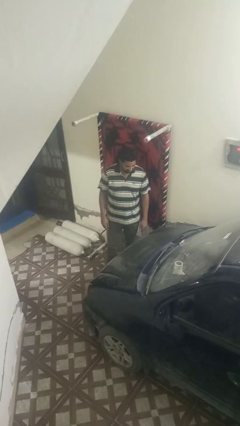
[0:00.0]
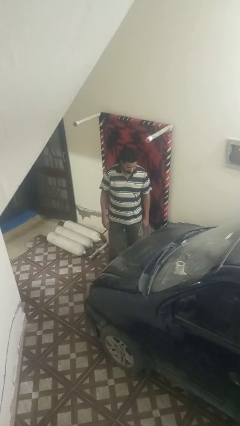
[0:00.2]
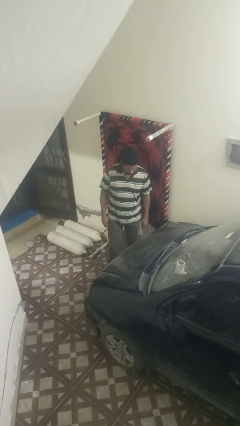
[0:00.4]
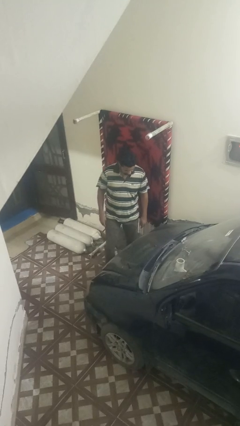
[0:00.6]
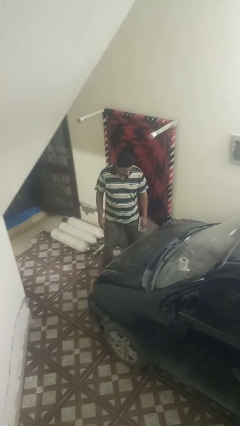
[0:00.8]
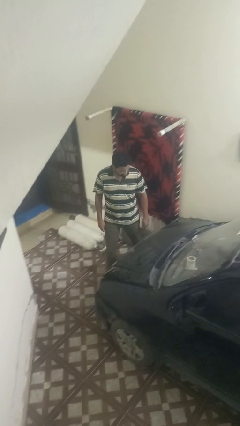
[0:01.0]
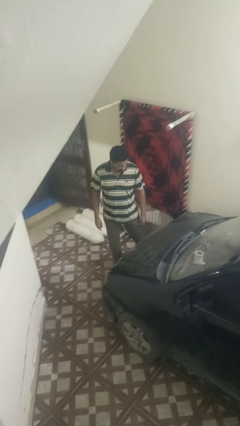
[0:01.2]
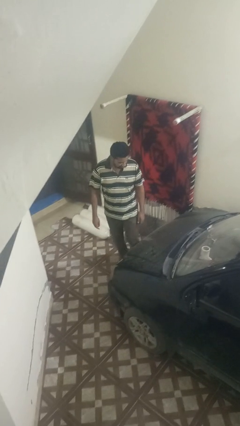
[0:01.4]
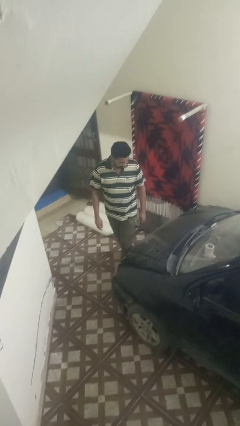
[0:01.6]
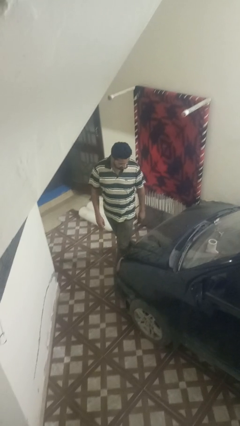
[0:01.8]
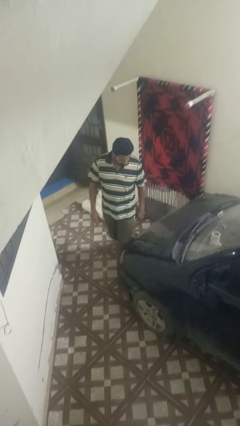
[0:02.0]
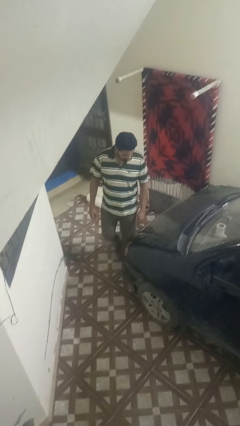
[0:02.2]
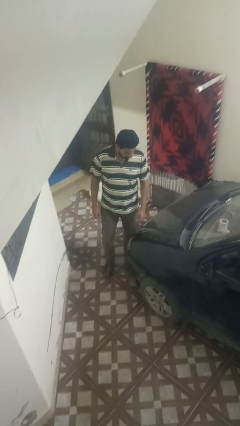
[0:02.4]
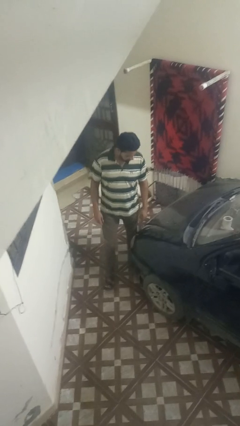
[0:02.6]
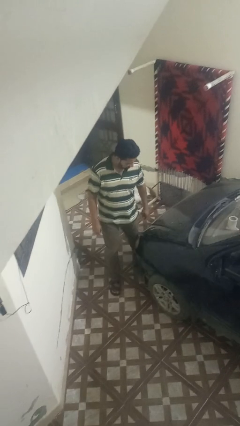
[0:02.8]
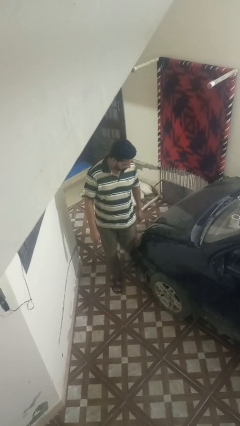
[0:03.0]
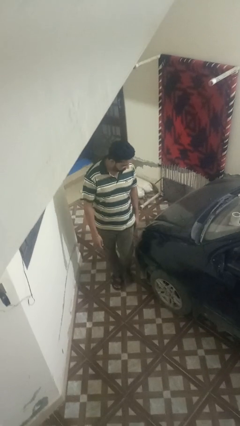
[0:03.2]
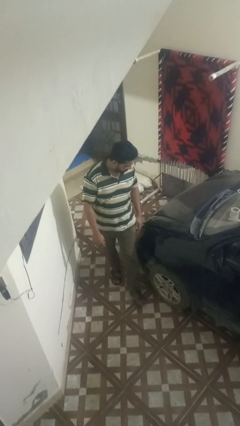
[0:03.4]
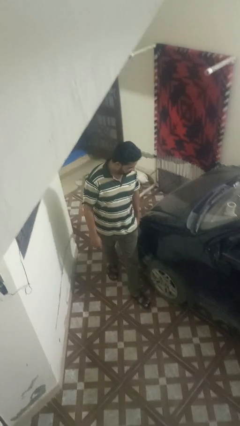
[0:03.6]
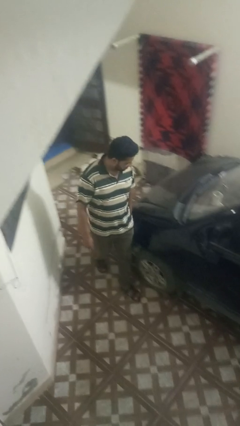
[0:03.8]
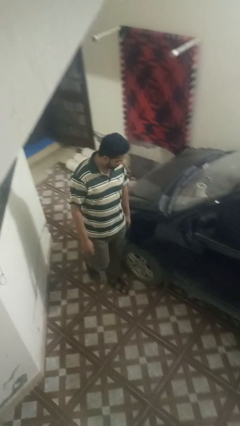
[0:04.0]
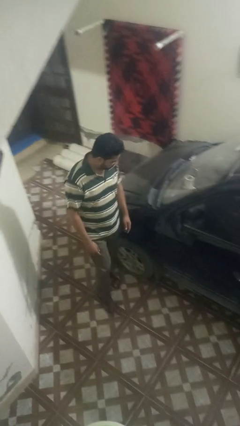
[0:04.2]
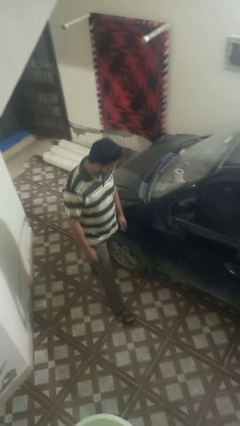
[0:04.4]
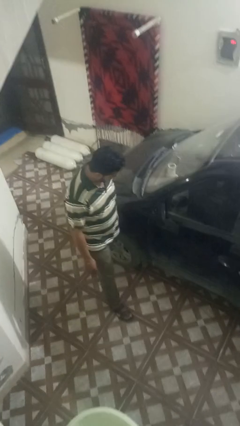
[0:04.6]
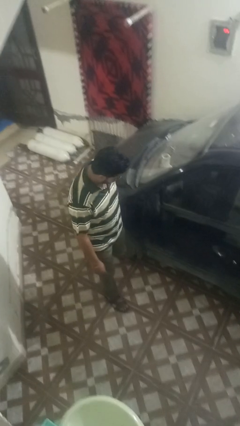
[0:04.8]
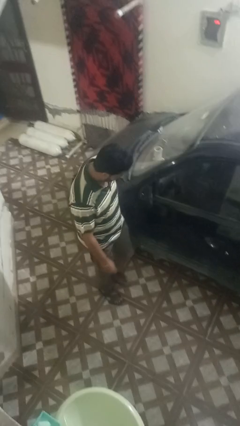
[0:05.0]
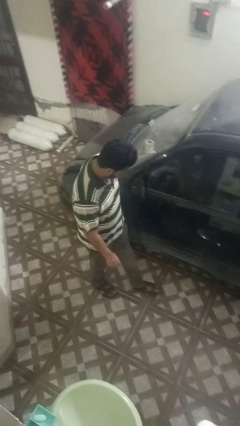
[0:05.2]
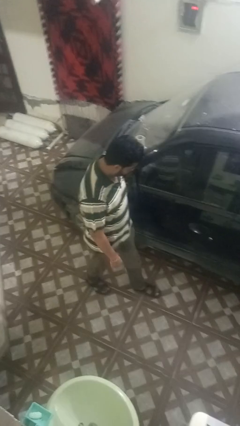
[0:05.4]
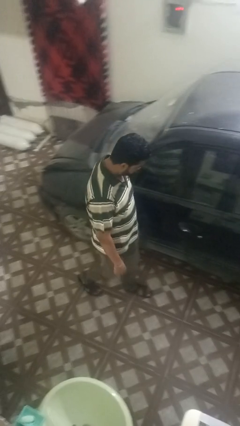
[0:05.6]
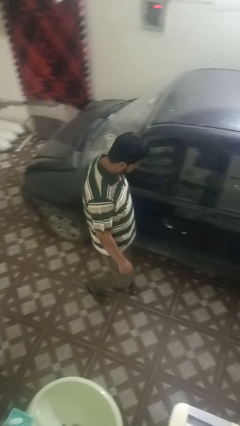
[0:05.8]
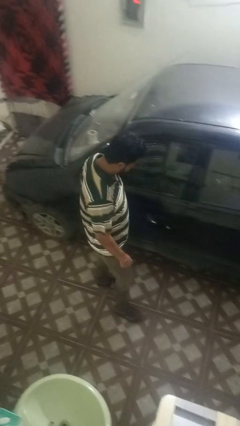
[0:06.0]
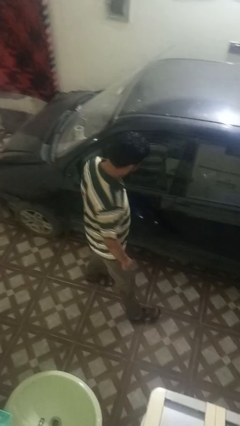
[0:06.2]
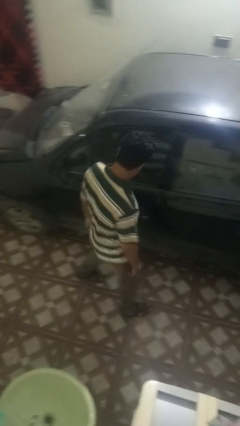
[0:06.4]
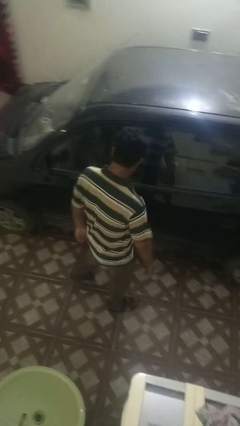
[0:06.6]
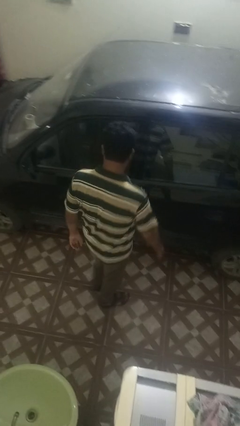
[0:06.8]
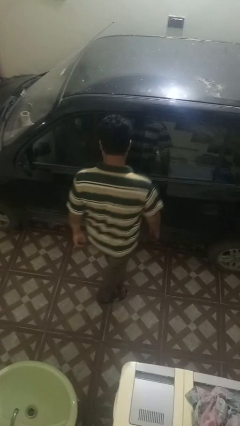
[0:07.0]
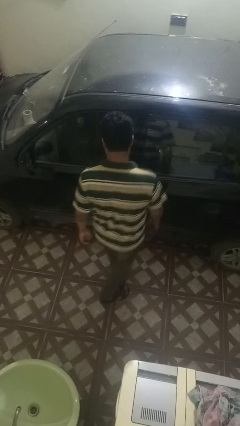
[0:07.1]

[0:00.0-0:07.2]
person walks around car

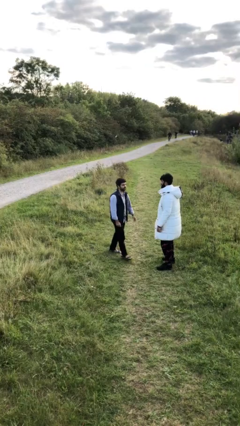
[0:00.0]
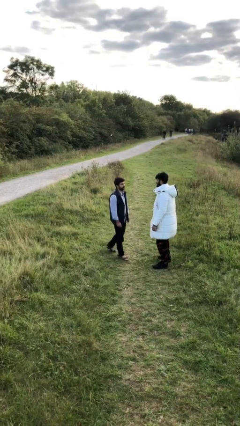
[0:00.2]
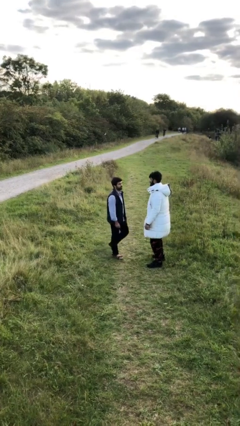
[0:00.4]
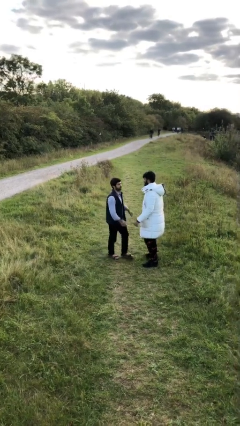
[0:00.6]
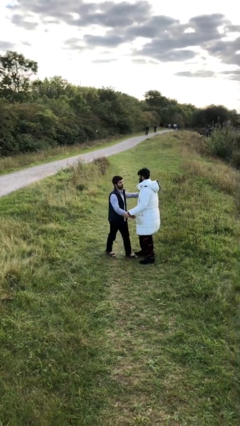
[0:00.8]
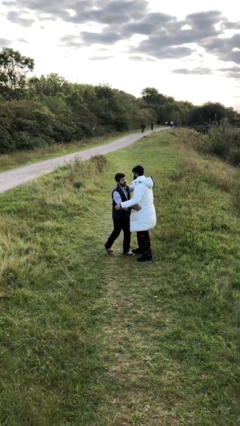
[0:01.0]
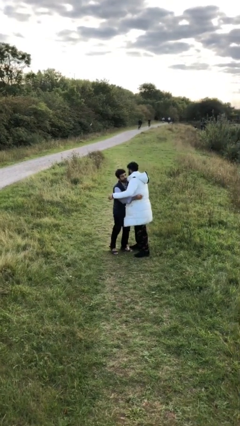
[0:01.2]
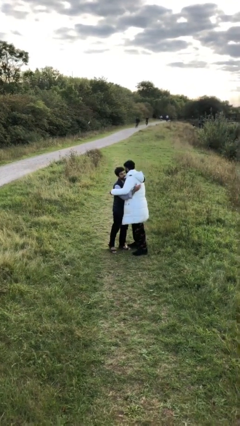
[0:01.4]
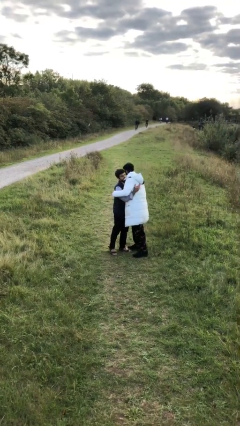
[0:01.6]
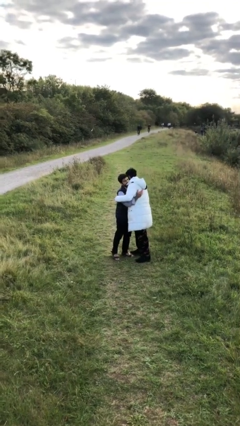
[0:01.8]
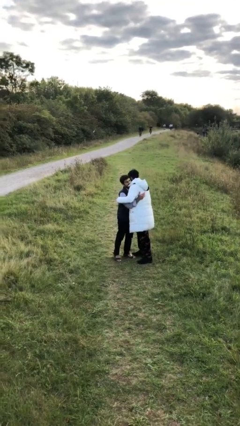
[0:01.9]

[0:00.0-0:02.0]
person embraces person

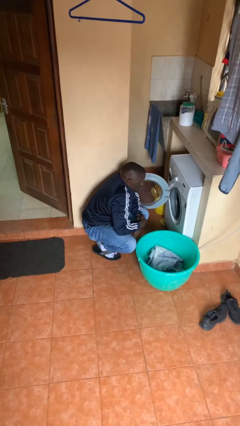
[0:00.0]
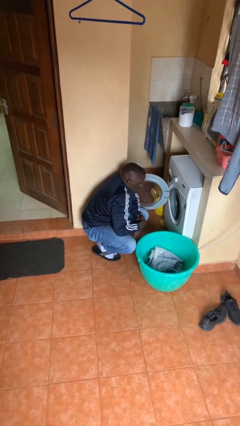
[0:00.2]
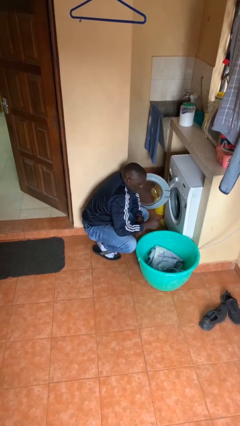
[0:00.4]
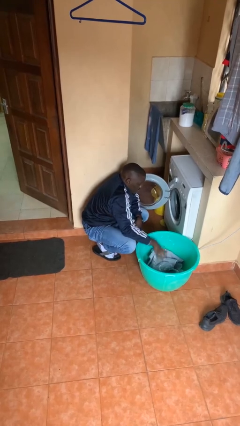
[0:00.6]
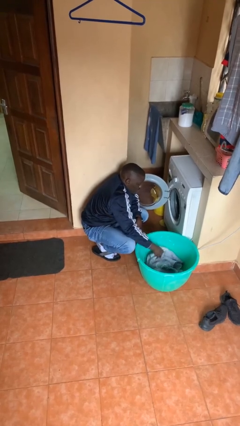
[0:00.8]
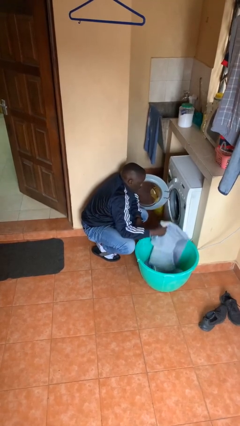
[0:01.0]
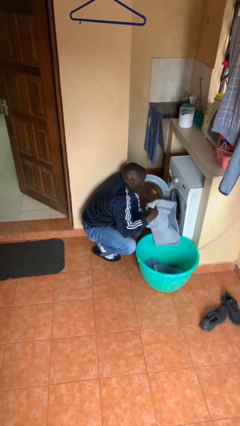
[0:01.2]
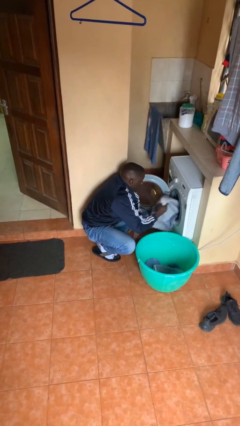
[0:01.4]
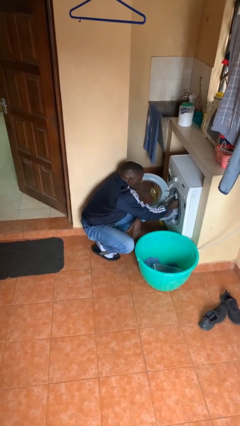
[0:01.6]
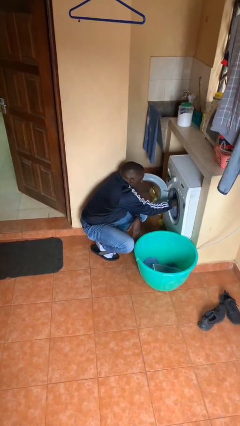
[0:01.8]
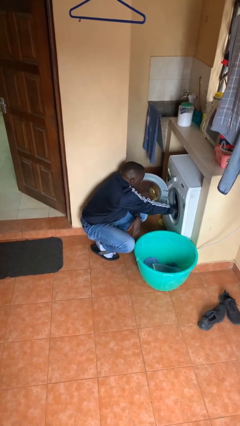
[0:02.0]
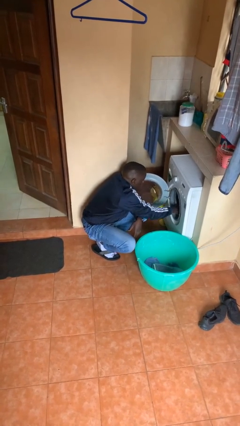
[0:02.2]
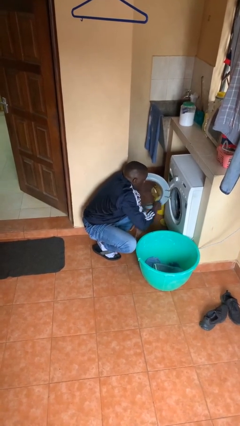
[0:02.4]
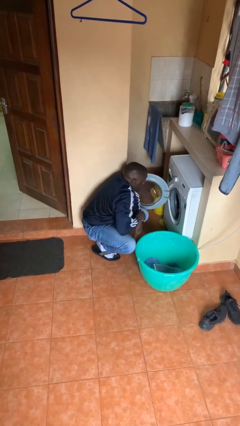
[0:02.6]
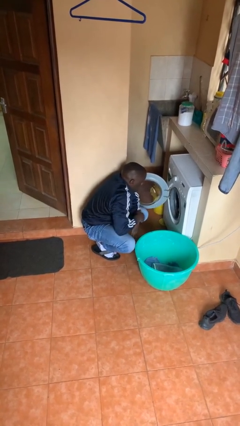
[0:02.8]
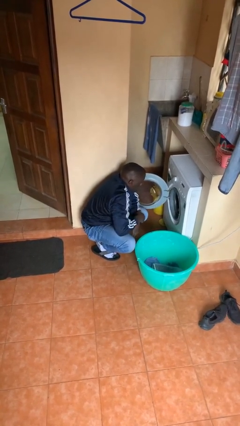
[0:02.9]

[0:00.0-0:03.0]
person loads clotheswasher

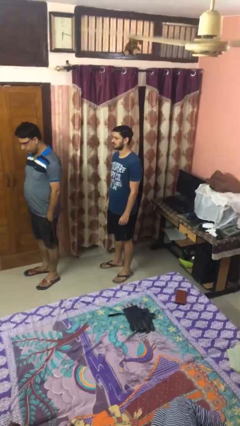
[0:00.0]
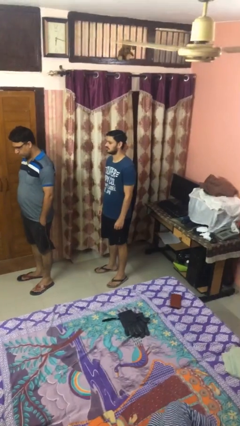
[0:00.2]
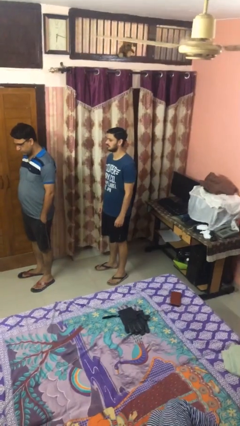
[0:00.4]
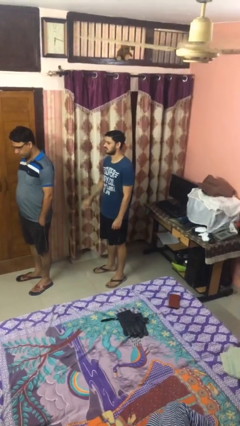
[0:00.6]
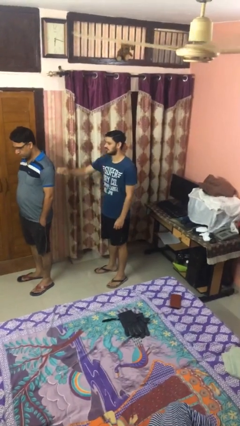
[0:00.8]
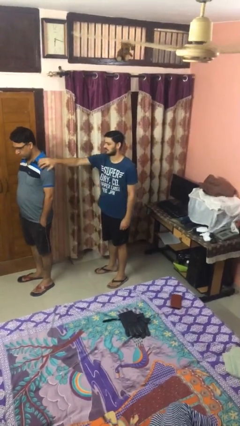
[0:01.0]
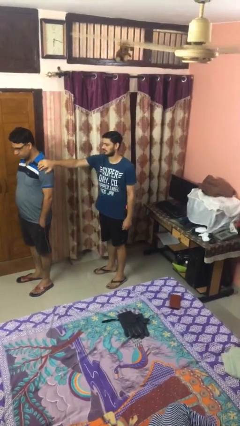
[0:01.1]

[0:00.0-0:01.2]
person grabs person by shoulder

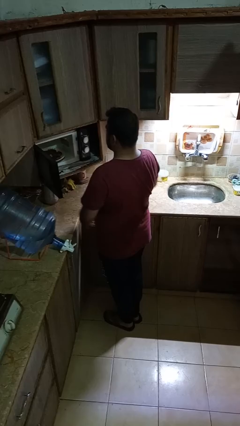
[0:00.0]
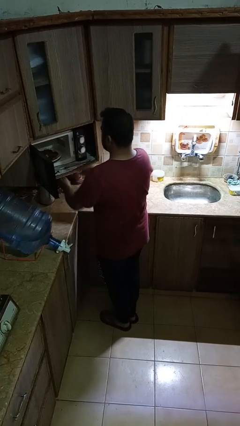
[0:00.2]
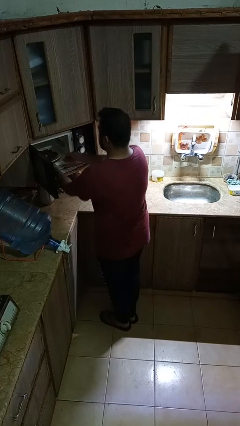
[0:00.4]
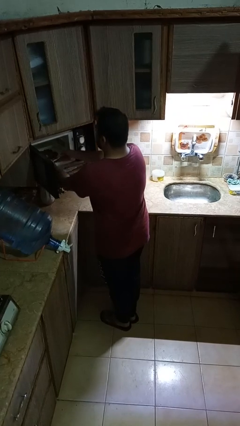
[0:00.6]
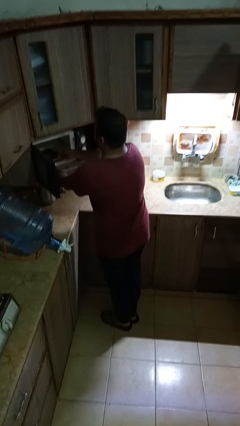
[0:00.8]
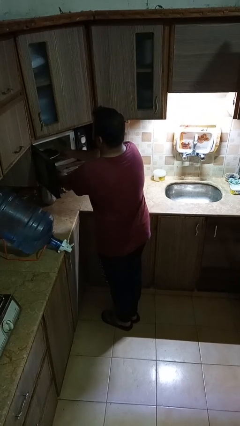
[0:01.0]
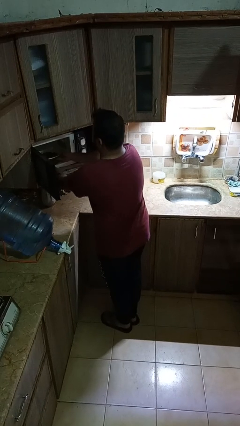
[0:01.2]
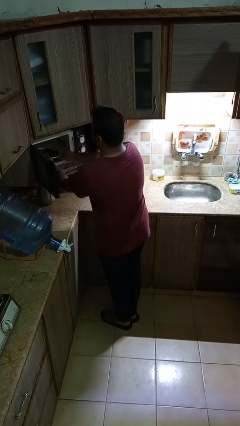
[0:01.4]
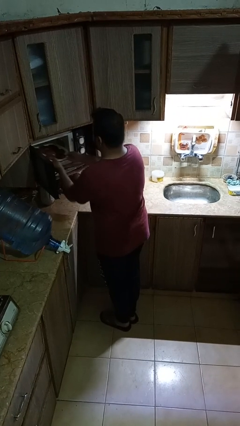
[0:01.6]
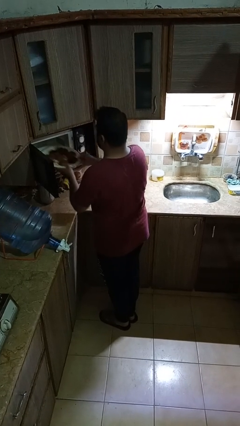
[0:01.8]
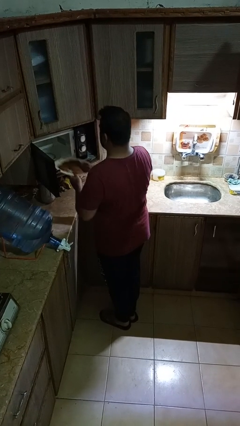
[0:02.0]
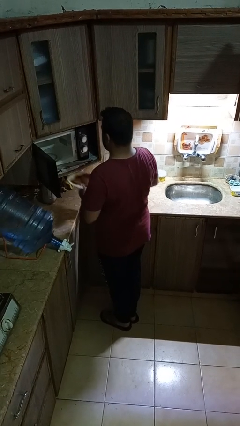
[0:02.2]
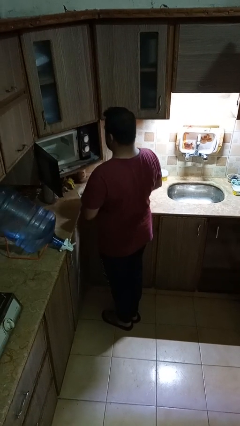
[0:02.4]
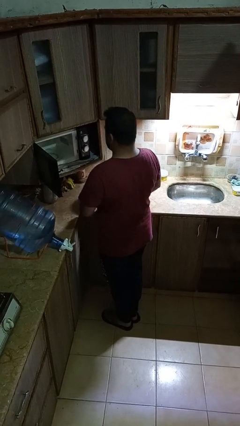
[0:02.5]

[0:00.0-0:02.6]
person takes object from microwave

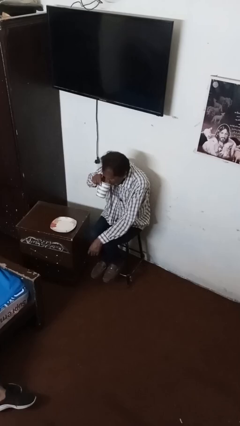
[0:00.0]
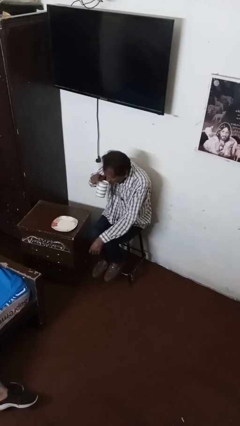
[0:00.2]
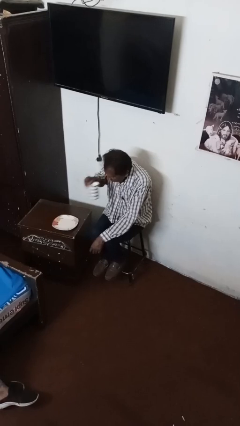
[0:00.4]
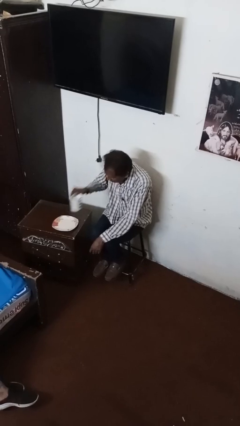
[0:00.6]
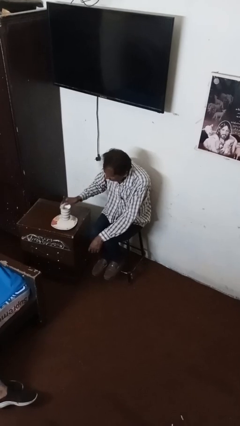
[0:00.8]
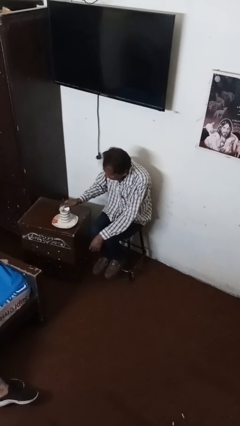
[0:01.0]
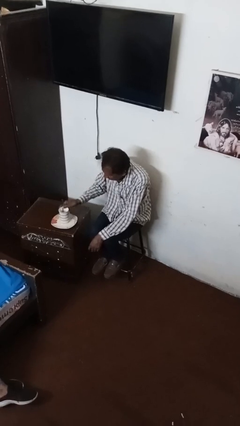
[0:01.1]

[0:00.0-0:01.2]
person drinks from mug

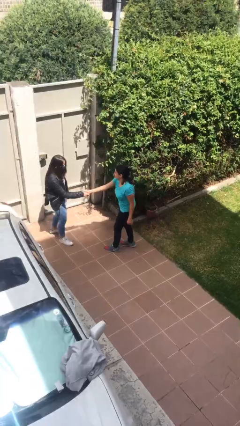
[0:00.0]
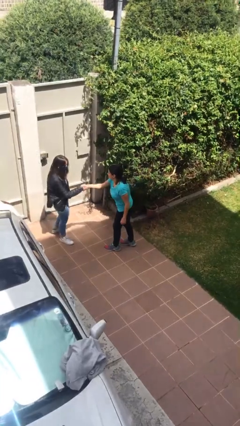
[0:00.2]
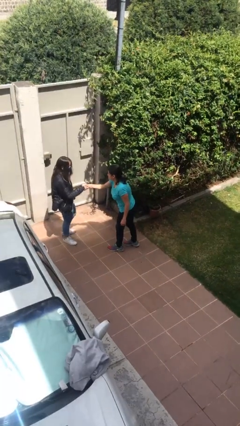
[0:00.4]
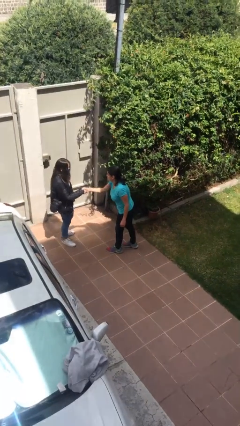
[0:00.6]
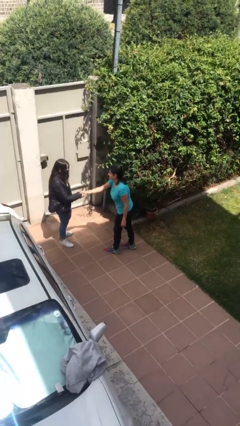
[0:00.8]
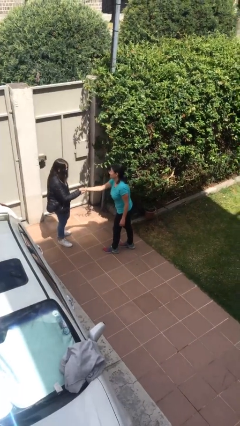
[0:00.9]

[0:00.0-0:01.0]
person shakes hand
